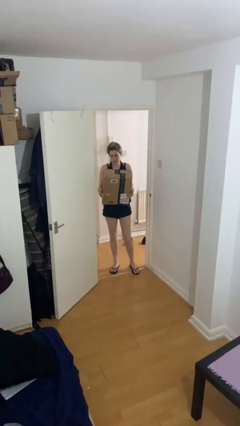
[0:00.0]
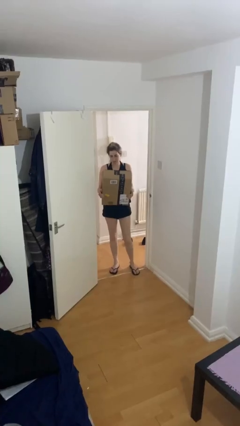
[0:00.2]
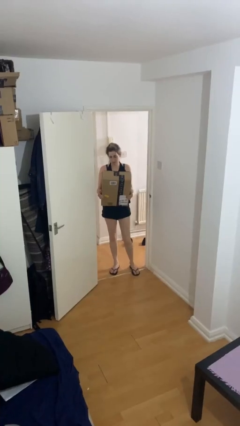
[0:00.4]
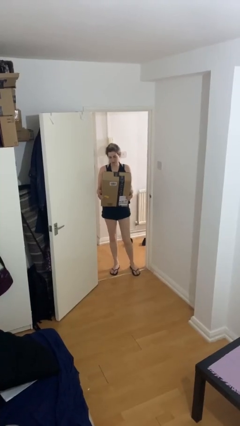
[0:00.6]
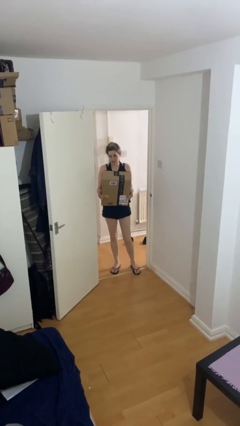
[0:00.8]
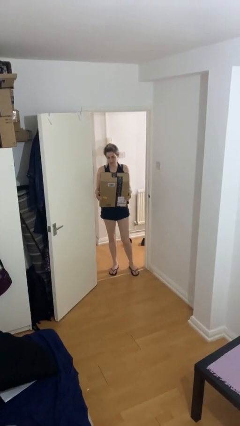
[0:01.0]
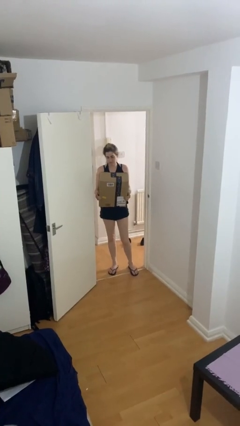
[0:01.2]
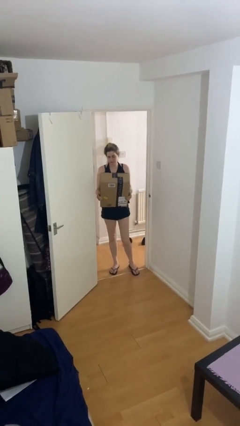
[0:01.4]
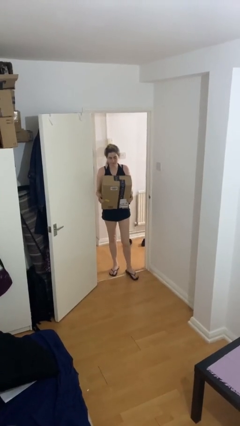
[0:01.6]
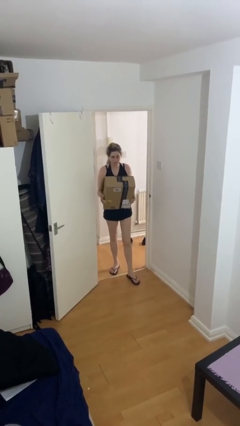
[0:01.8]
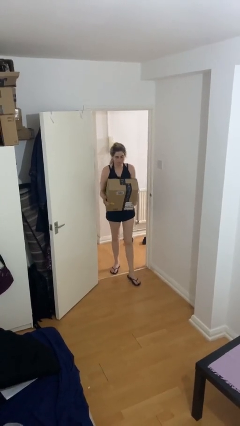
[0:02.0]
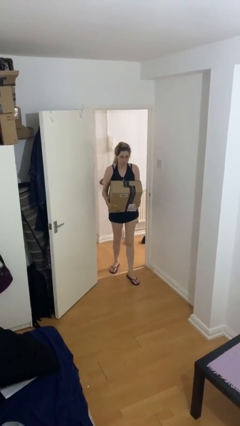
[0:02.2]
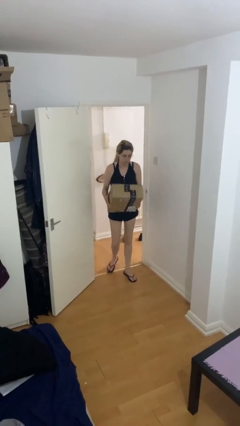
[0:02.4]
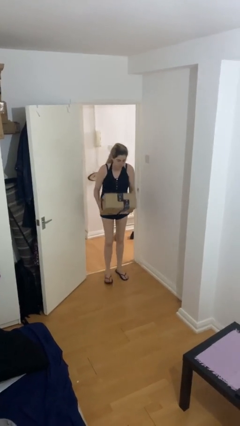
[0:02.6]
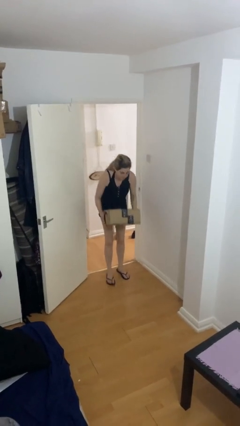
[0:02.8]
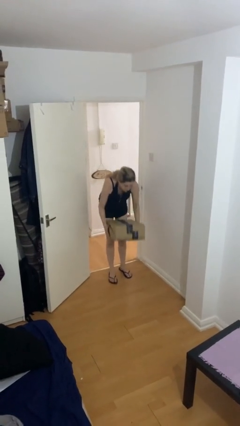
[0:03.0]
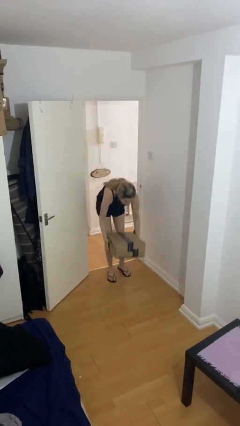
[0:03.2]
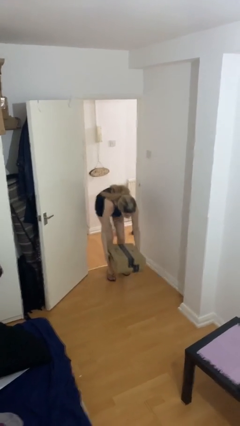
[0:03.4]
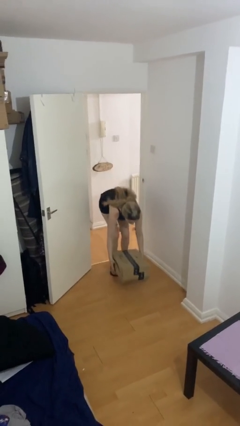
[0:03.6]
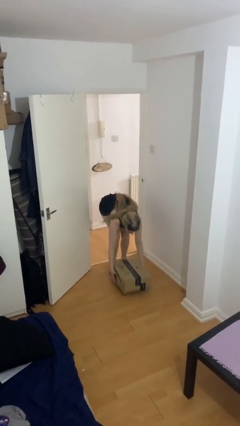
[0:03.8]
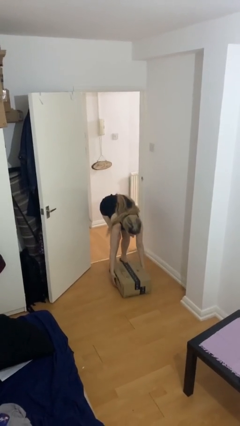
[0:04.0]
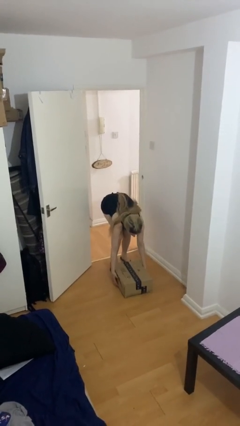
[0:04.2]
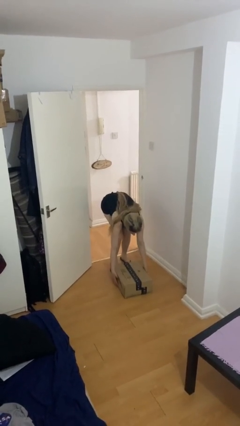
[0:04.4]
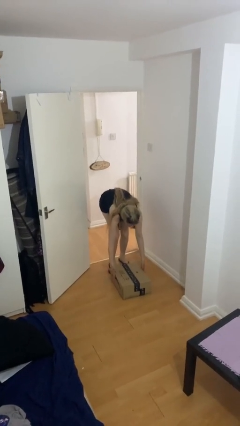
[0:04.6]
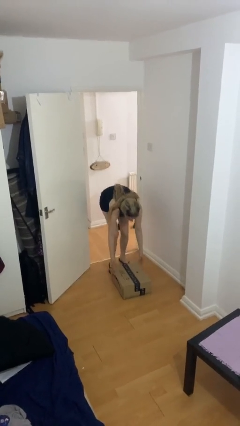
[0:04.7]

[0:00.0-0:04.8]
person puts down object on floor

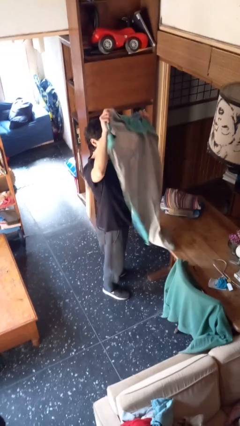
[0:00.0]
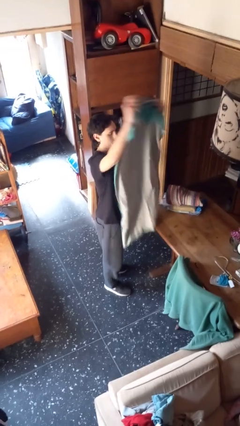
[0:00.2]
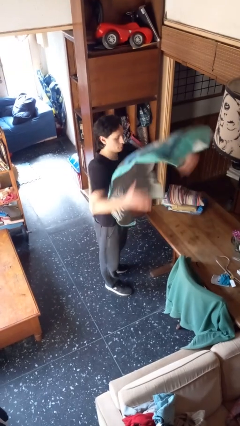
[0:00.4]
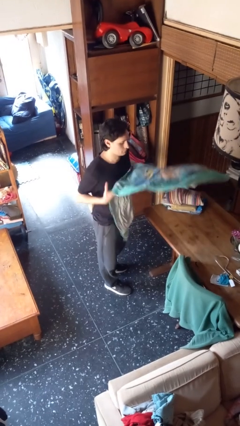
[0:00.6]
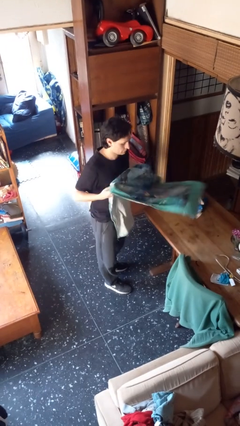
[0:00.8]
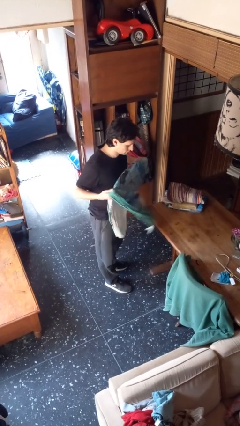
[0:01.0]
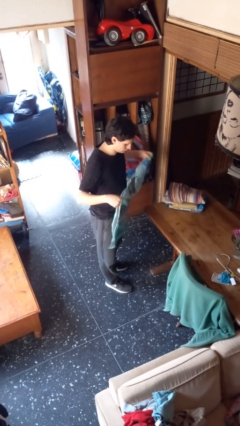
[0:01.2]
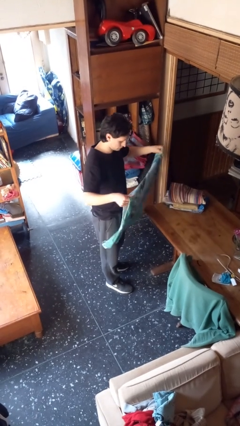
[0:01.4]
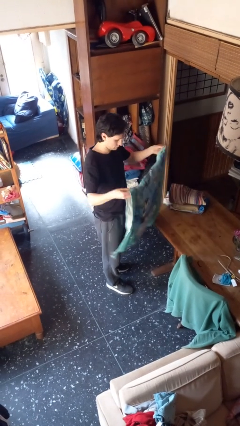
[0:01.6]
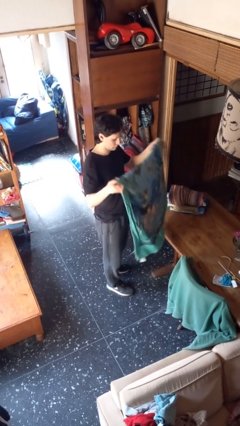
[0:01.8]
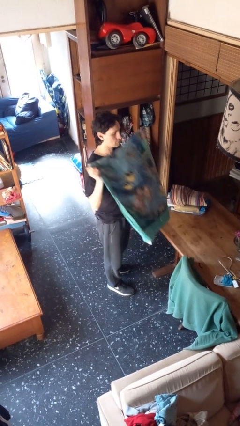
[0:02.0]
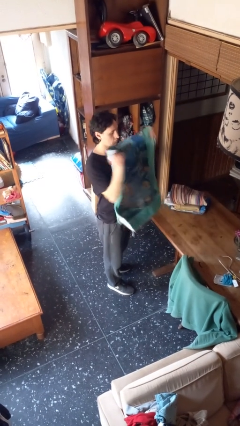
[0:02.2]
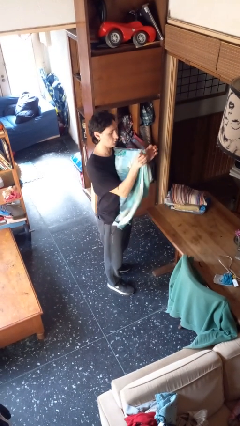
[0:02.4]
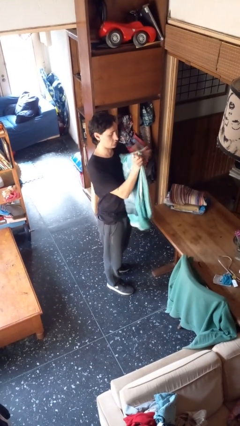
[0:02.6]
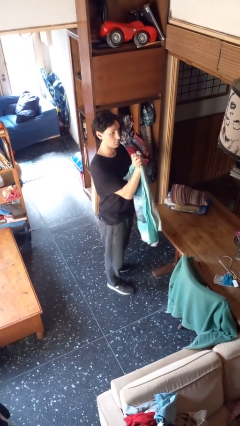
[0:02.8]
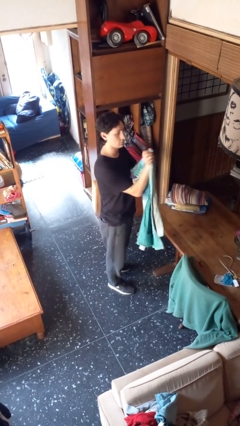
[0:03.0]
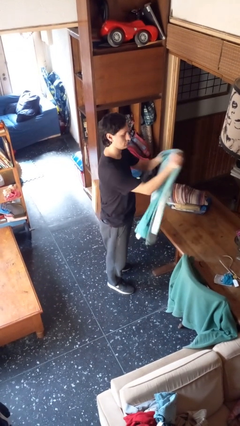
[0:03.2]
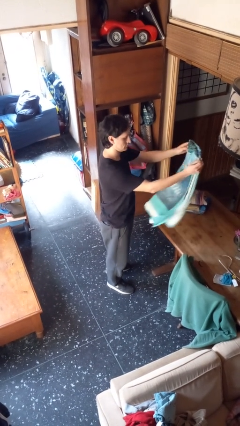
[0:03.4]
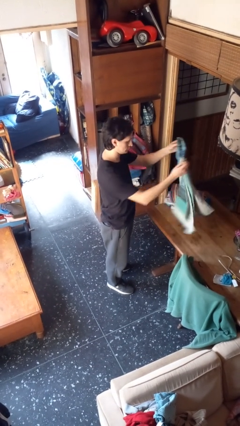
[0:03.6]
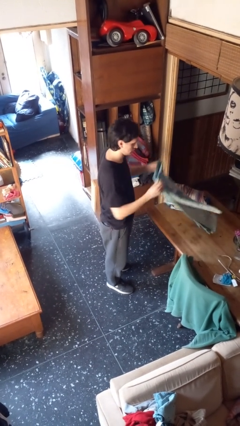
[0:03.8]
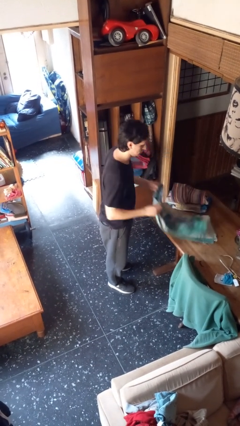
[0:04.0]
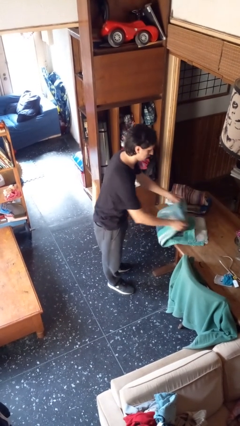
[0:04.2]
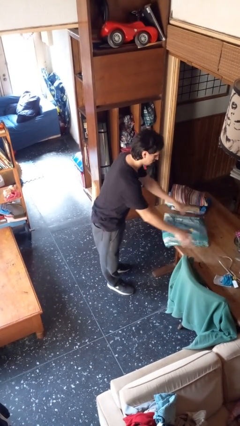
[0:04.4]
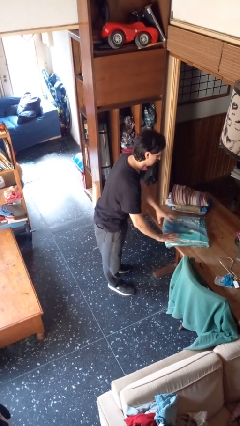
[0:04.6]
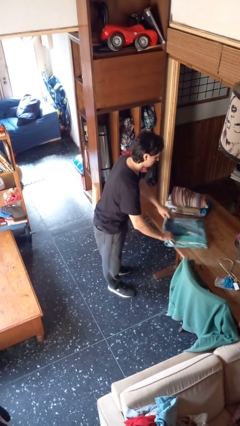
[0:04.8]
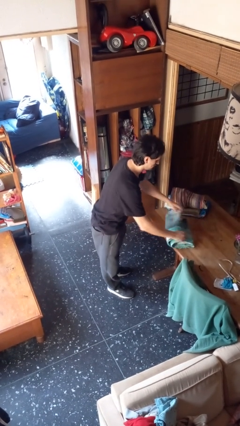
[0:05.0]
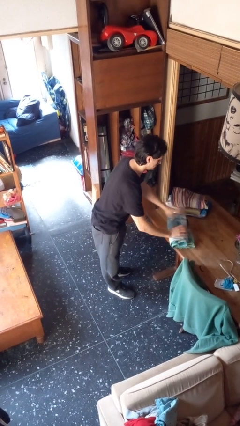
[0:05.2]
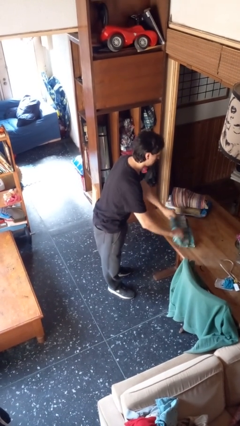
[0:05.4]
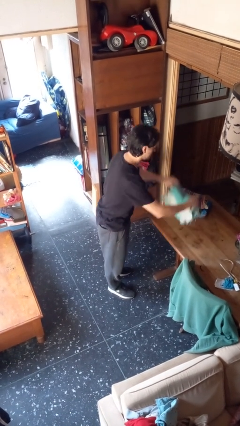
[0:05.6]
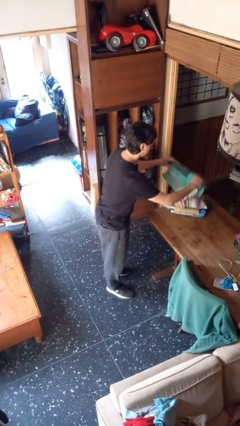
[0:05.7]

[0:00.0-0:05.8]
person folds towel

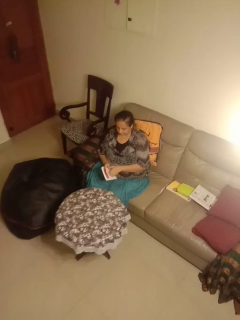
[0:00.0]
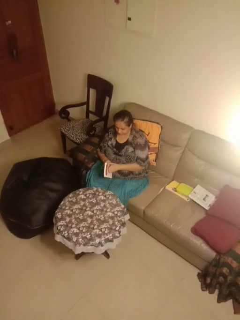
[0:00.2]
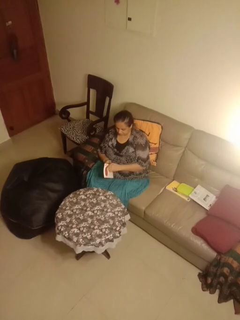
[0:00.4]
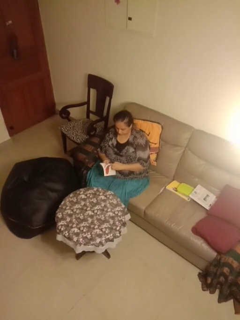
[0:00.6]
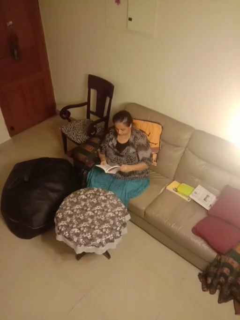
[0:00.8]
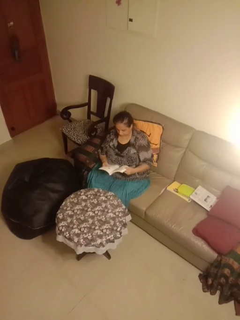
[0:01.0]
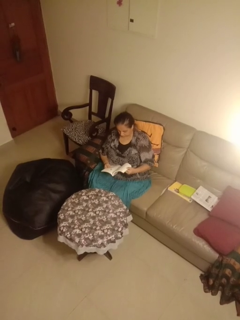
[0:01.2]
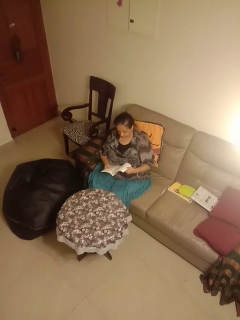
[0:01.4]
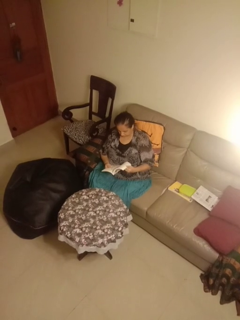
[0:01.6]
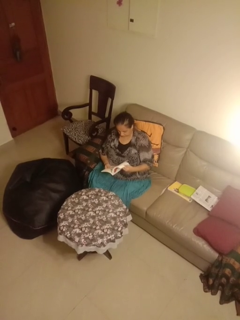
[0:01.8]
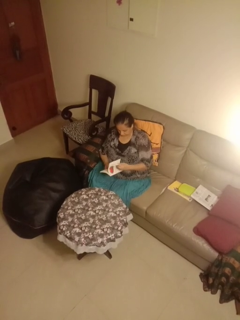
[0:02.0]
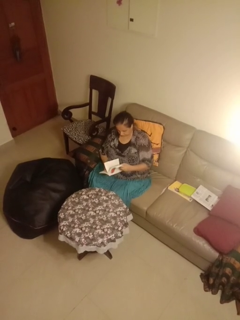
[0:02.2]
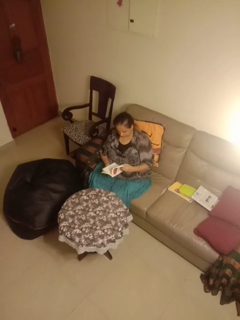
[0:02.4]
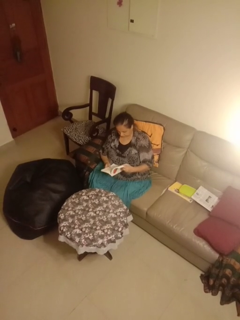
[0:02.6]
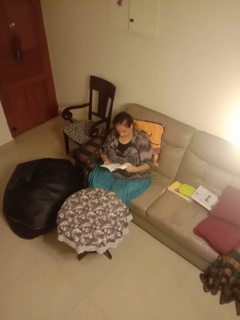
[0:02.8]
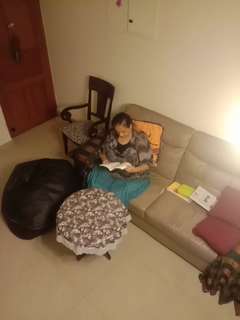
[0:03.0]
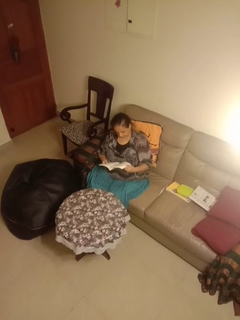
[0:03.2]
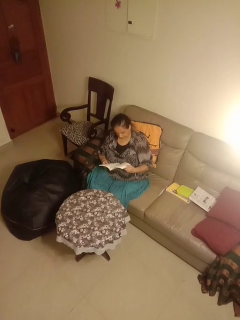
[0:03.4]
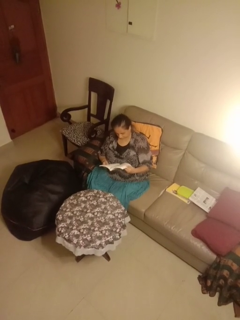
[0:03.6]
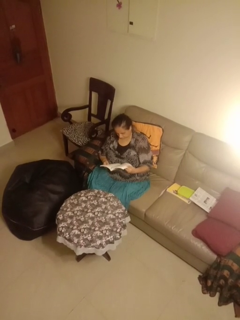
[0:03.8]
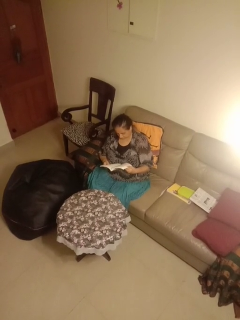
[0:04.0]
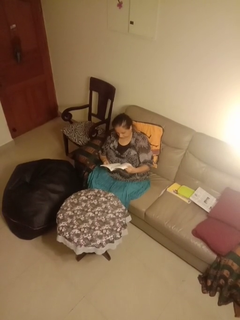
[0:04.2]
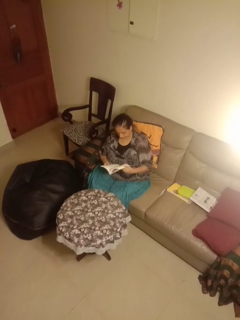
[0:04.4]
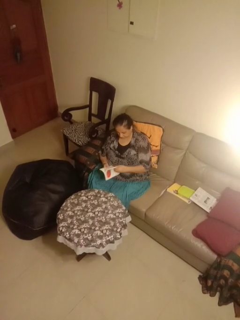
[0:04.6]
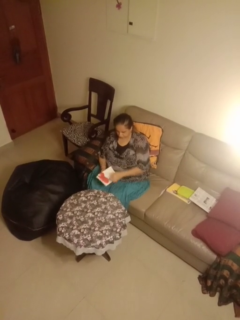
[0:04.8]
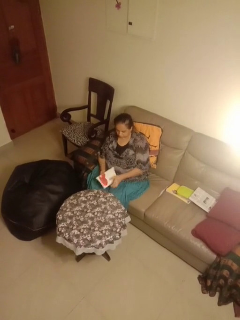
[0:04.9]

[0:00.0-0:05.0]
person reads book

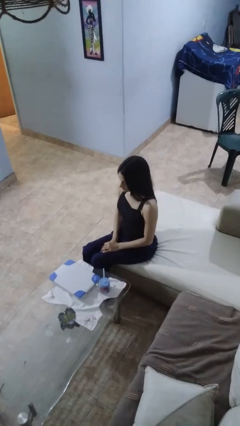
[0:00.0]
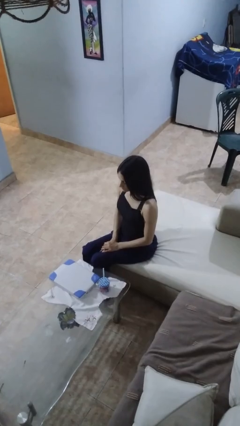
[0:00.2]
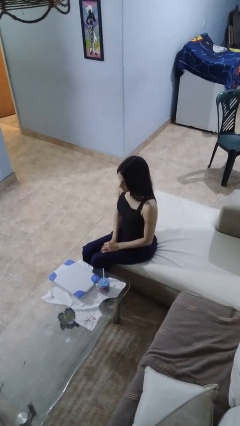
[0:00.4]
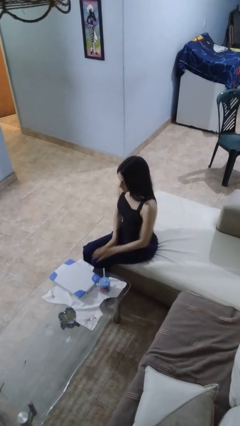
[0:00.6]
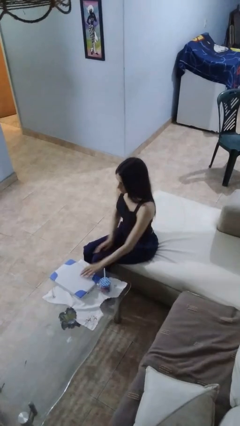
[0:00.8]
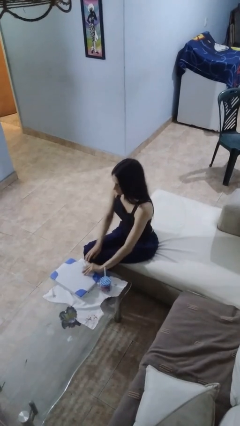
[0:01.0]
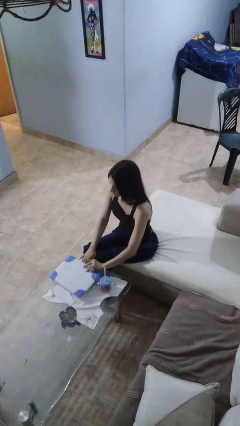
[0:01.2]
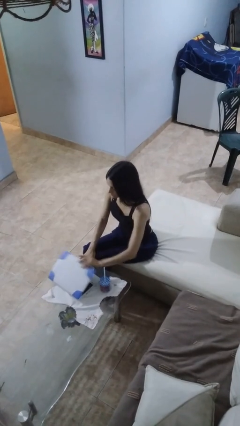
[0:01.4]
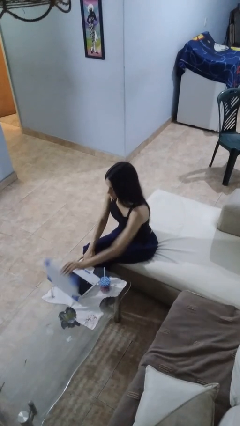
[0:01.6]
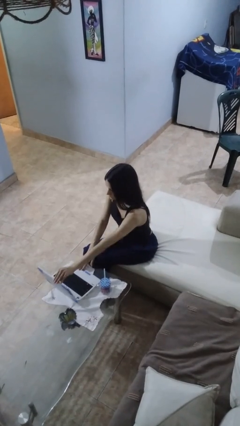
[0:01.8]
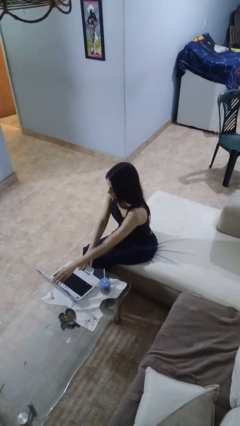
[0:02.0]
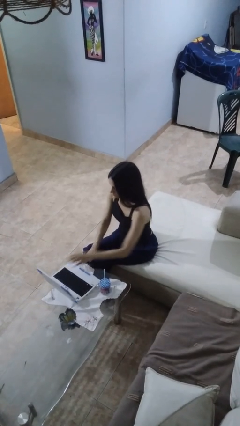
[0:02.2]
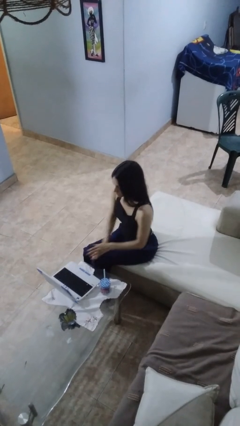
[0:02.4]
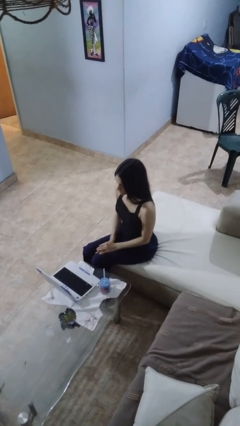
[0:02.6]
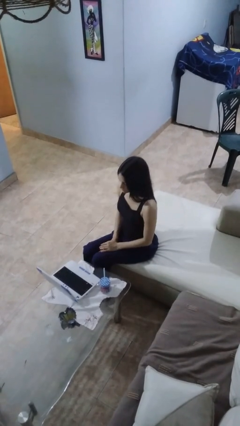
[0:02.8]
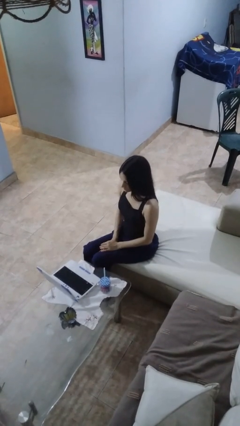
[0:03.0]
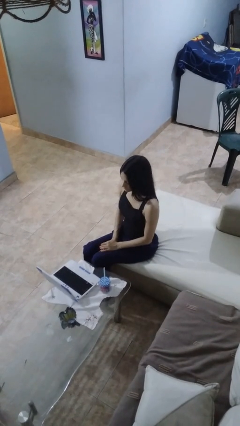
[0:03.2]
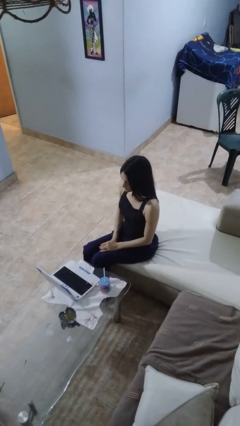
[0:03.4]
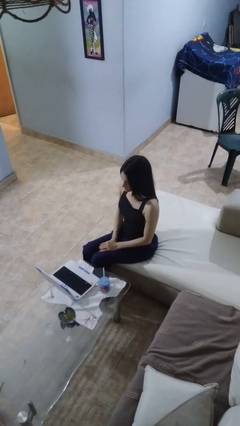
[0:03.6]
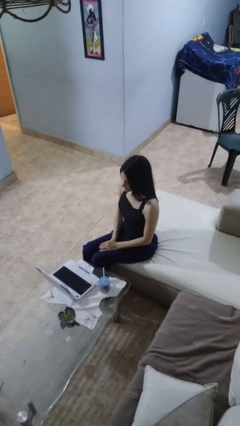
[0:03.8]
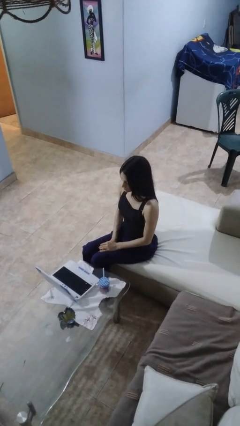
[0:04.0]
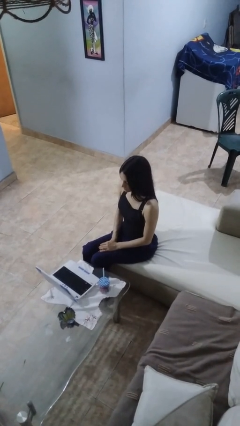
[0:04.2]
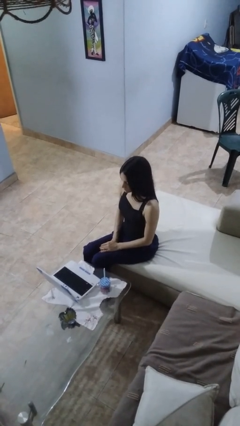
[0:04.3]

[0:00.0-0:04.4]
person opens laptop
